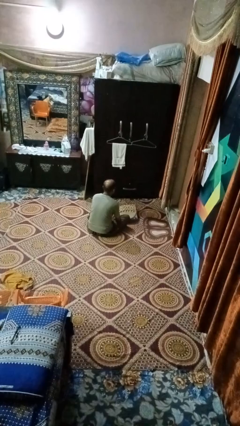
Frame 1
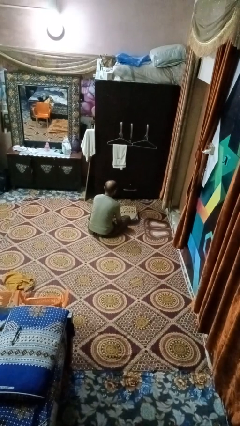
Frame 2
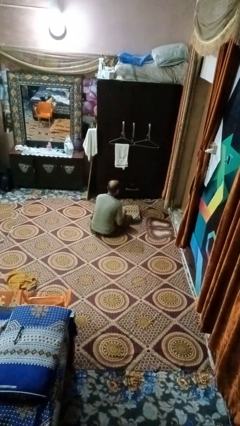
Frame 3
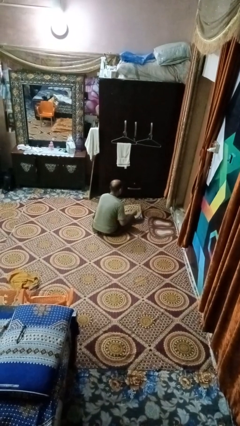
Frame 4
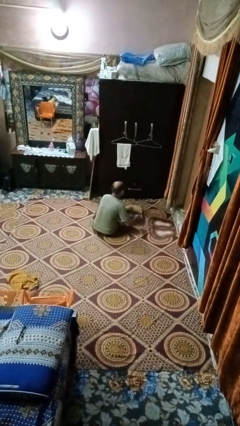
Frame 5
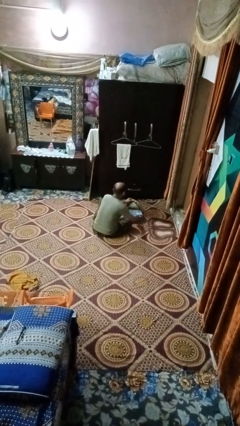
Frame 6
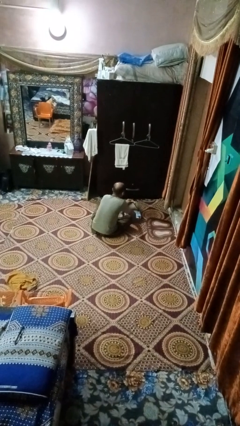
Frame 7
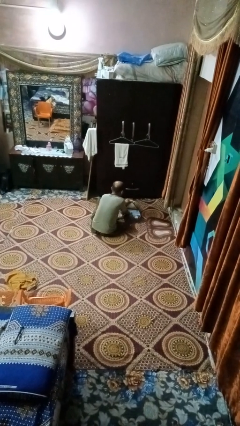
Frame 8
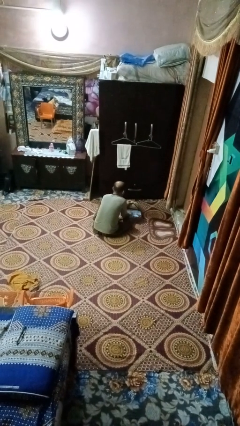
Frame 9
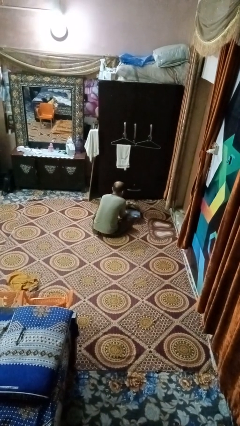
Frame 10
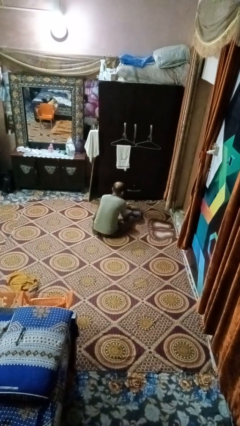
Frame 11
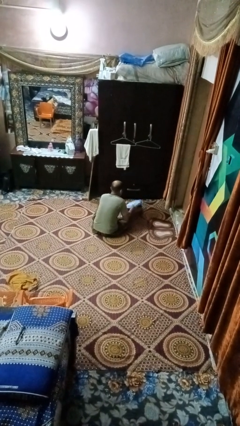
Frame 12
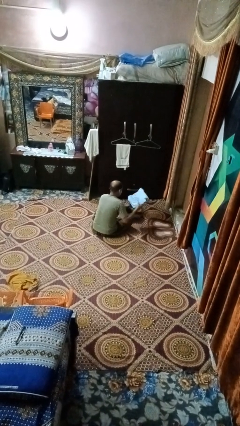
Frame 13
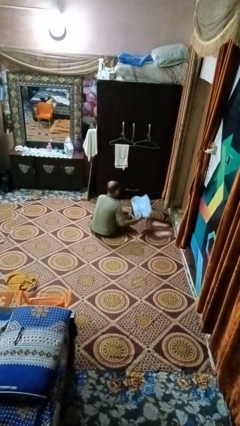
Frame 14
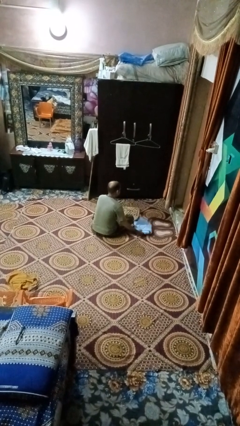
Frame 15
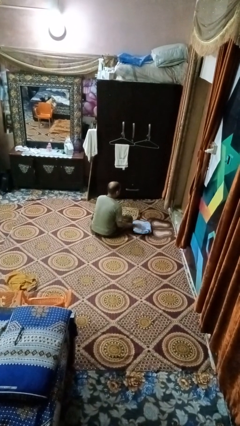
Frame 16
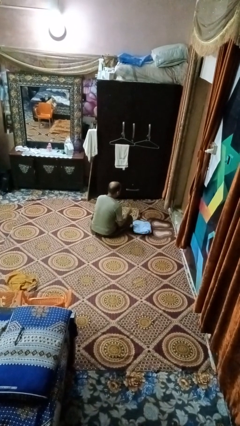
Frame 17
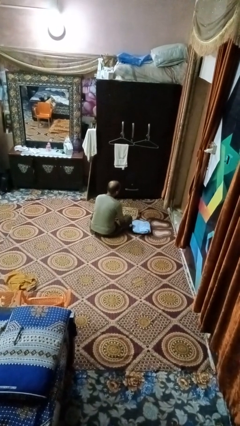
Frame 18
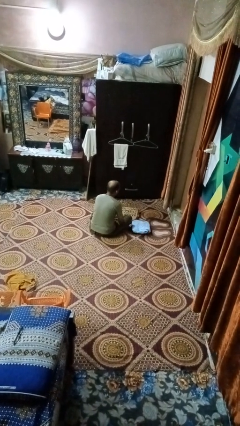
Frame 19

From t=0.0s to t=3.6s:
person takes off backpack

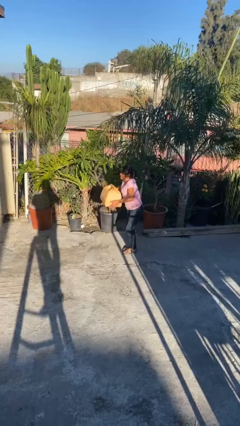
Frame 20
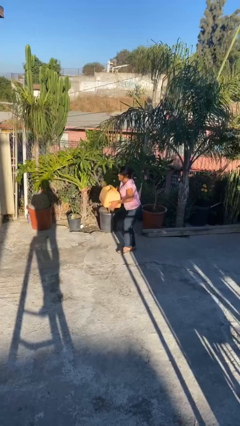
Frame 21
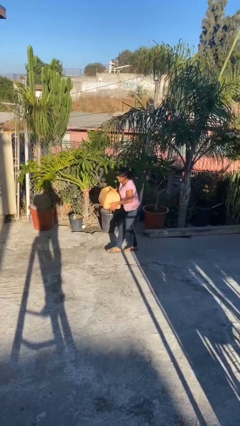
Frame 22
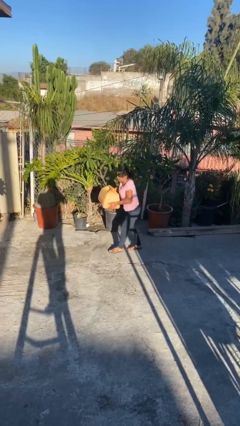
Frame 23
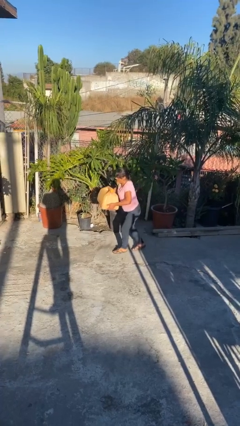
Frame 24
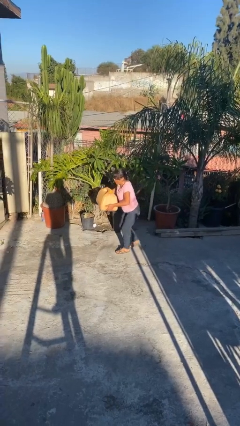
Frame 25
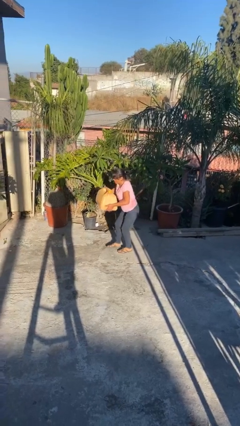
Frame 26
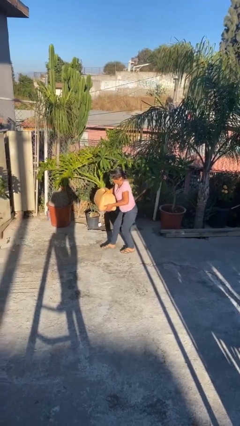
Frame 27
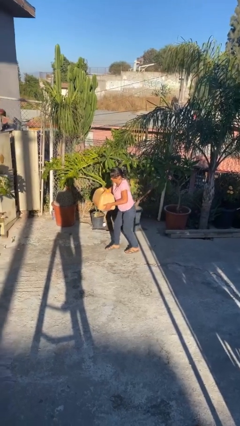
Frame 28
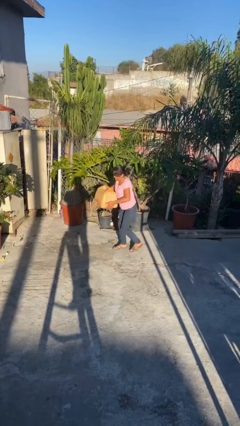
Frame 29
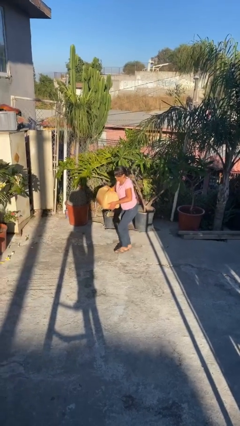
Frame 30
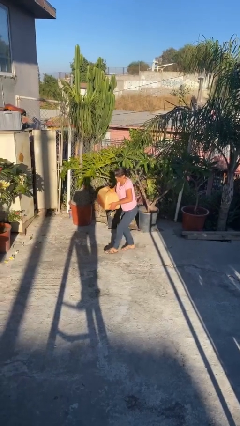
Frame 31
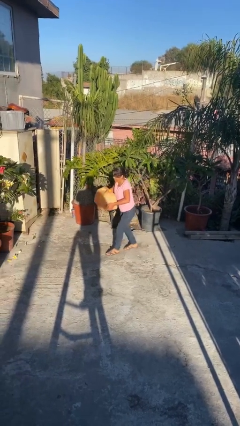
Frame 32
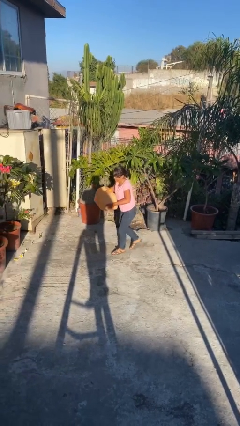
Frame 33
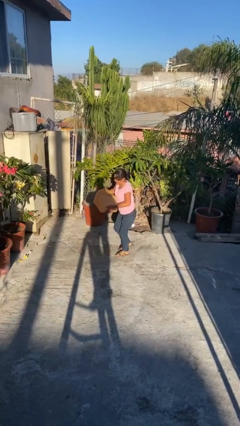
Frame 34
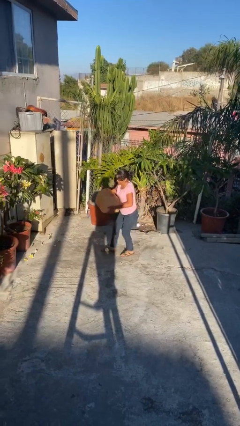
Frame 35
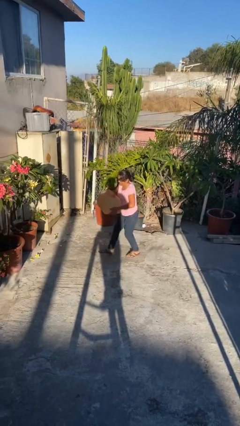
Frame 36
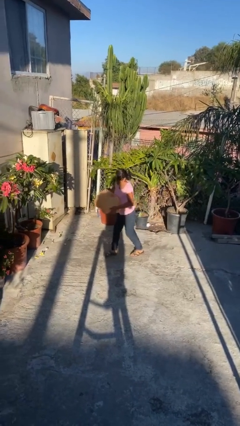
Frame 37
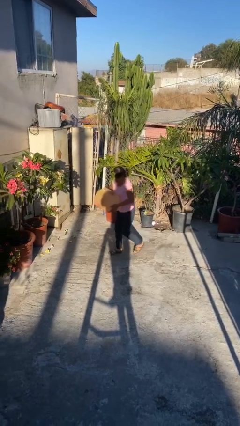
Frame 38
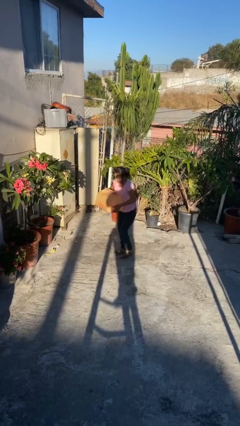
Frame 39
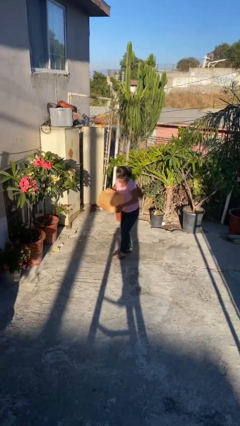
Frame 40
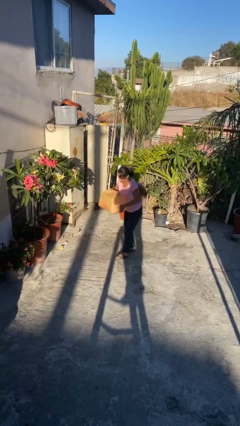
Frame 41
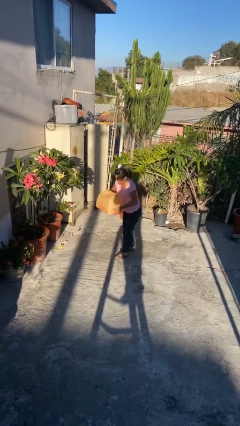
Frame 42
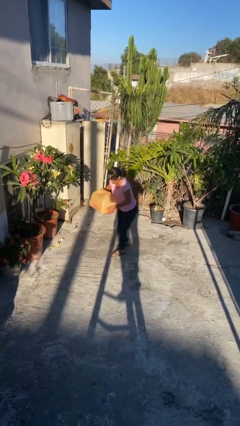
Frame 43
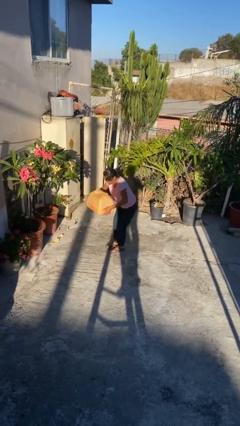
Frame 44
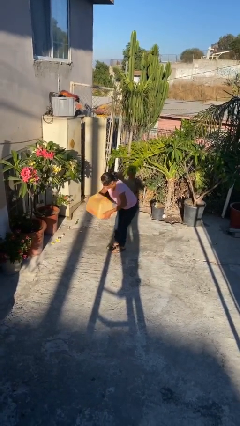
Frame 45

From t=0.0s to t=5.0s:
person carries heavy object

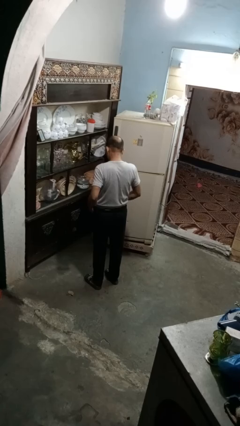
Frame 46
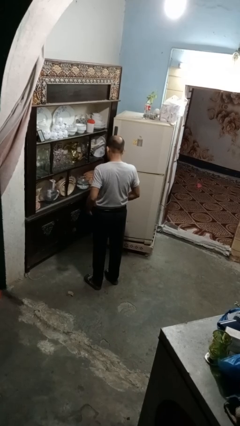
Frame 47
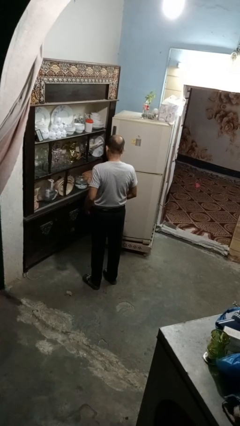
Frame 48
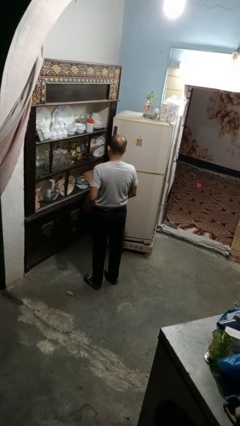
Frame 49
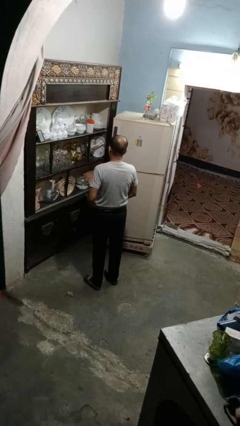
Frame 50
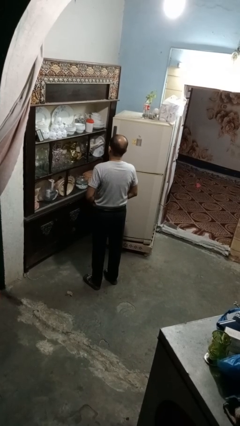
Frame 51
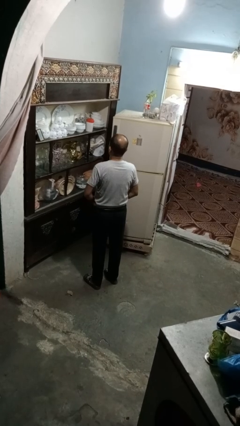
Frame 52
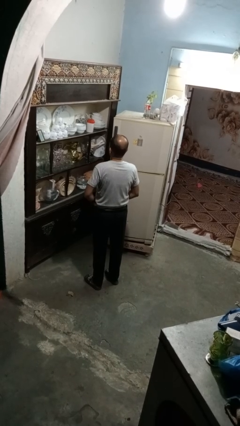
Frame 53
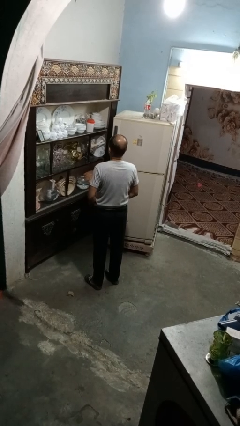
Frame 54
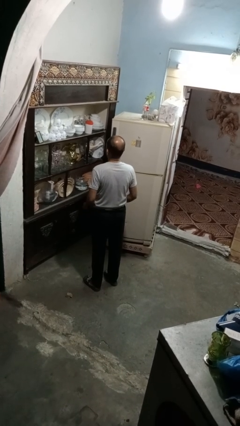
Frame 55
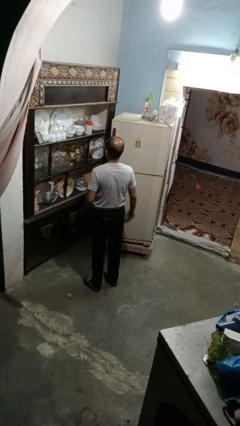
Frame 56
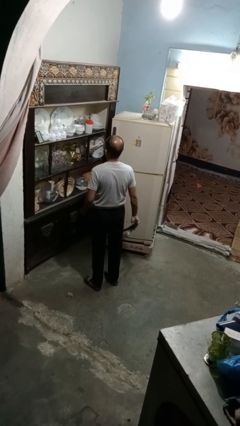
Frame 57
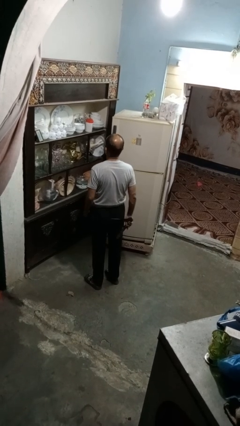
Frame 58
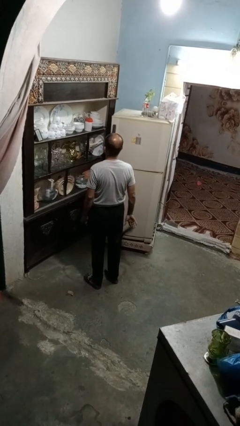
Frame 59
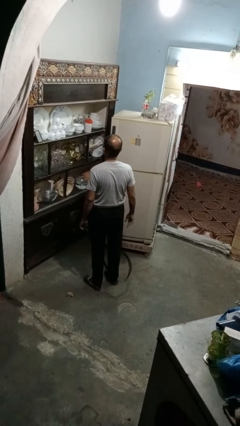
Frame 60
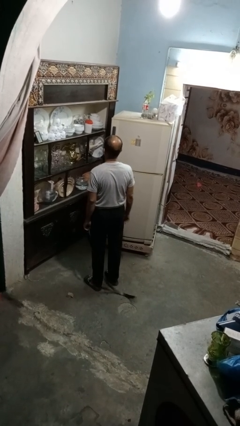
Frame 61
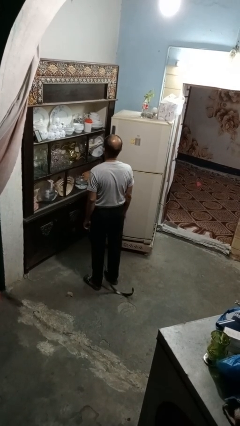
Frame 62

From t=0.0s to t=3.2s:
person takes off belt

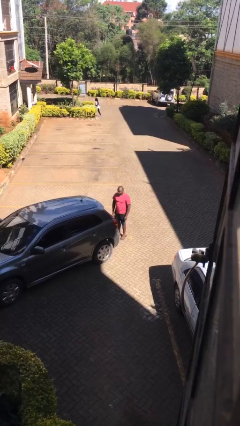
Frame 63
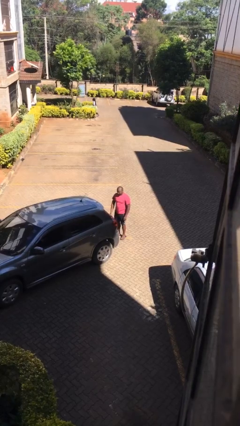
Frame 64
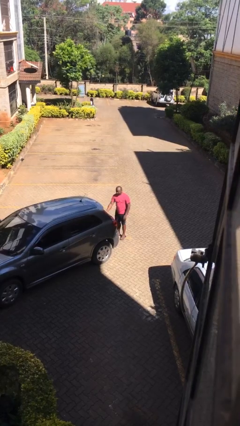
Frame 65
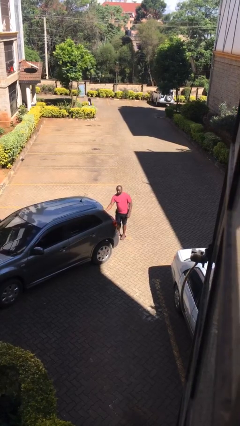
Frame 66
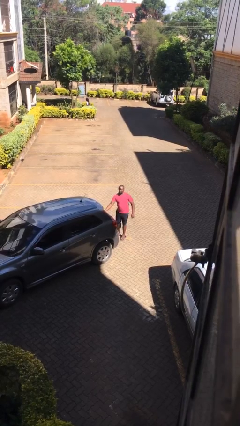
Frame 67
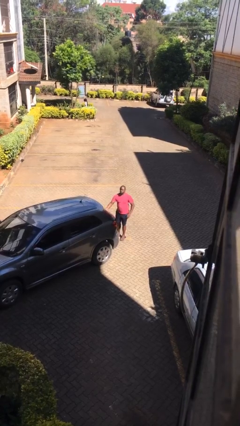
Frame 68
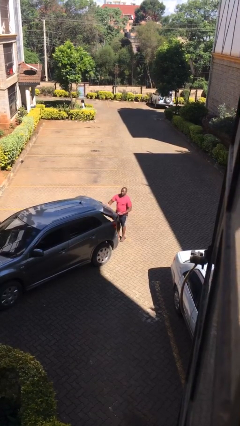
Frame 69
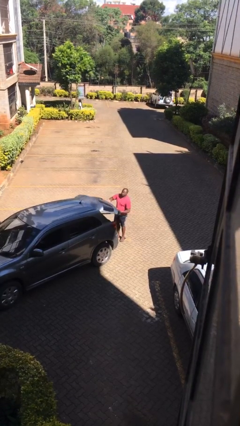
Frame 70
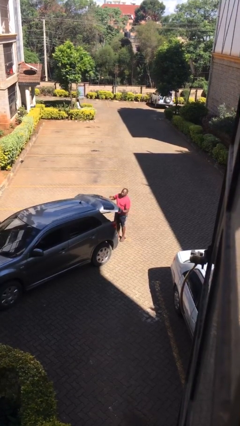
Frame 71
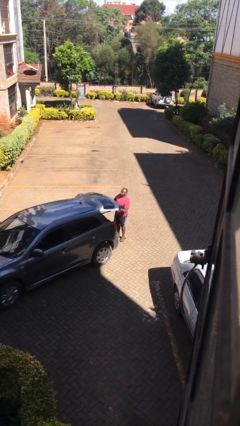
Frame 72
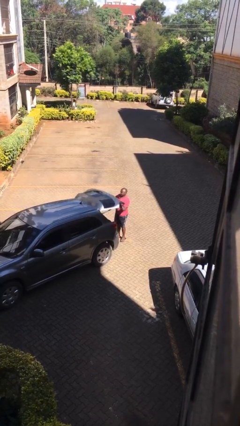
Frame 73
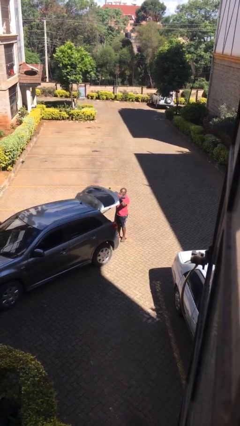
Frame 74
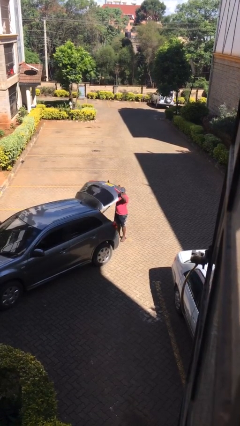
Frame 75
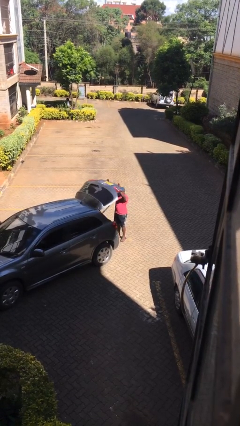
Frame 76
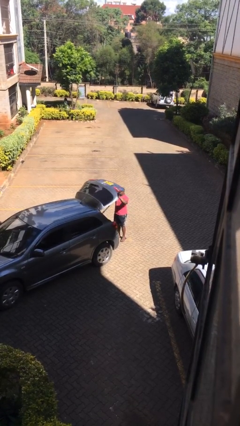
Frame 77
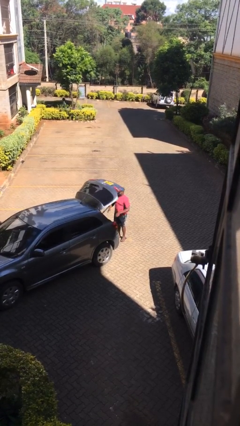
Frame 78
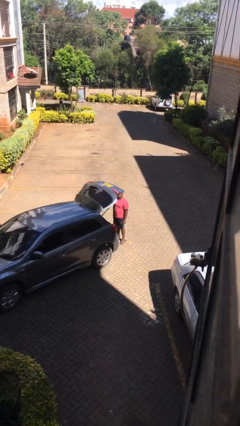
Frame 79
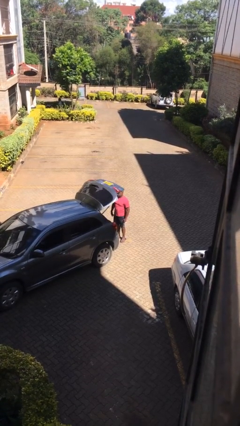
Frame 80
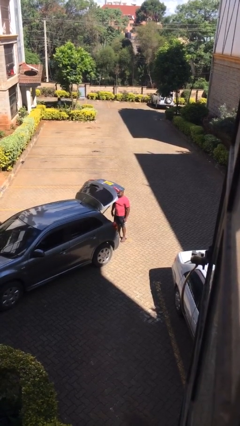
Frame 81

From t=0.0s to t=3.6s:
person opens car trunk

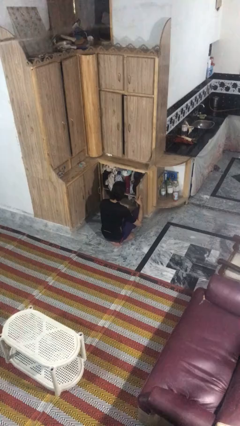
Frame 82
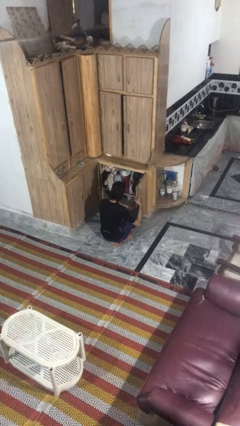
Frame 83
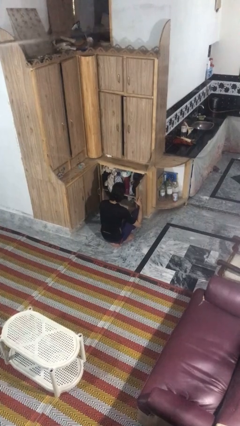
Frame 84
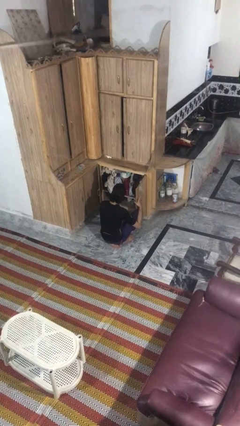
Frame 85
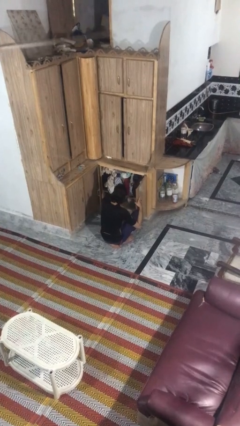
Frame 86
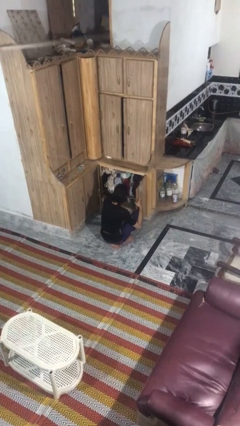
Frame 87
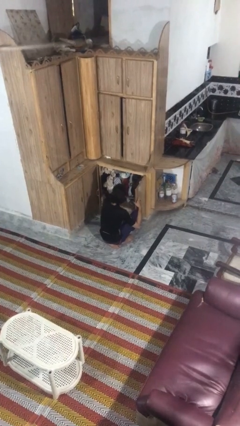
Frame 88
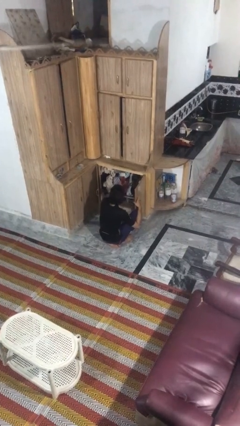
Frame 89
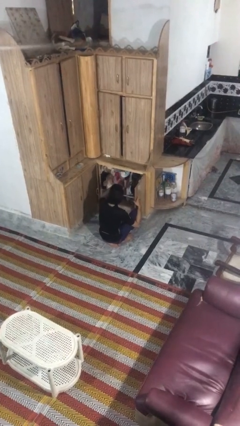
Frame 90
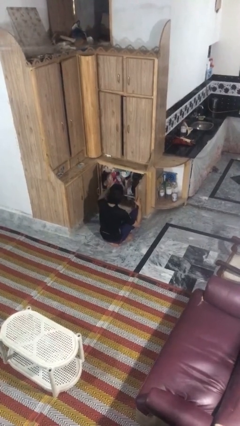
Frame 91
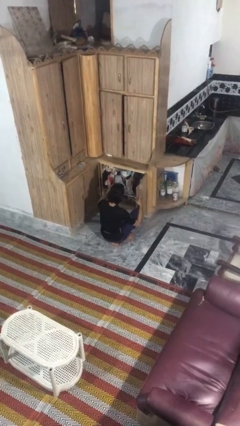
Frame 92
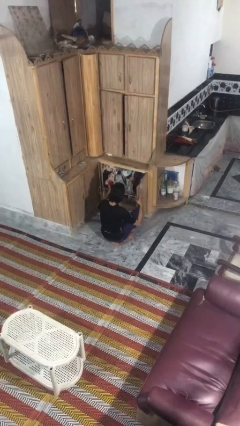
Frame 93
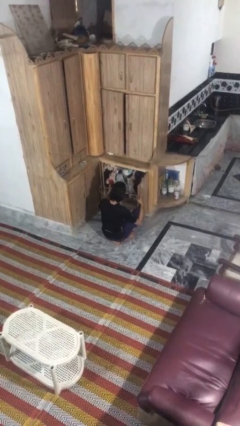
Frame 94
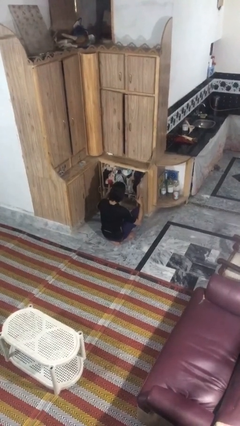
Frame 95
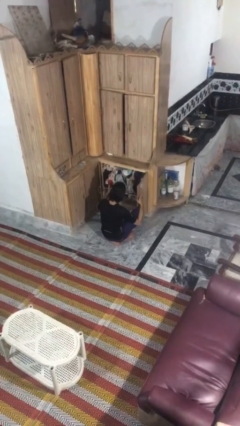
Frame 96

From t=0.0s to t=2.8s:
person picks up object from cabinet
